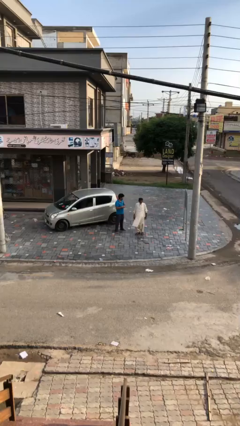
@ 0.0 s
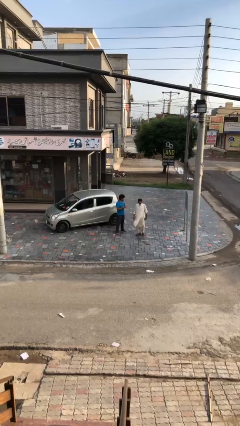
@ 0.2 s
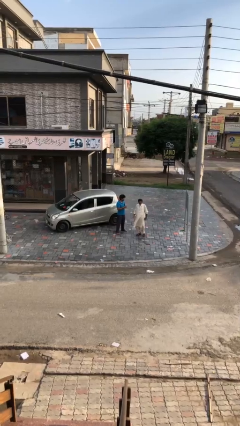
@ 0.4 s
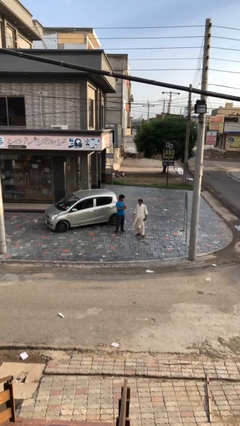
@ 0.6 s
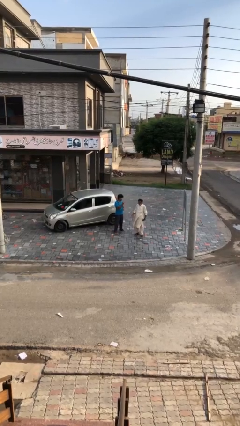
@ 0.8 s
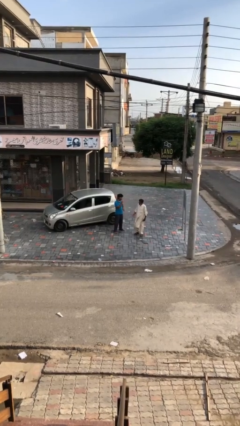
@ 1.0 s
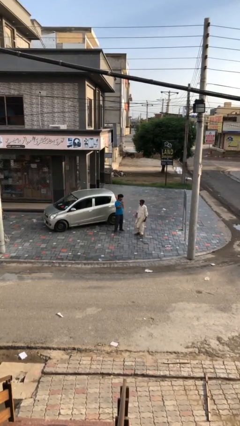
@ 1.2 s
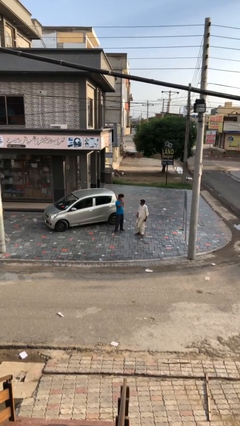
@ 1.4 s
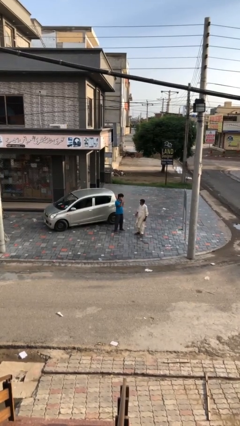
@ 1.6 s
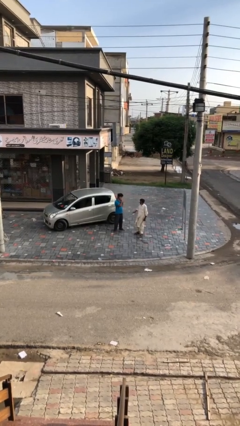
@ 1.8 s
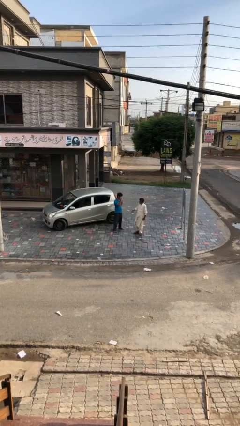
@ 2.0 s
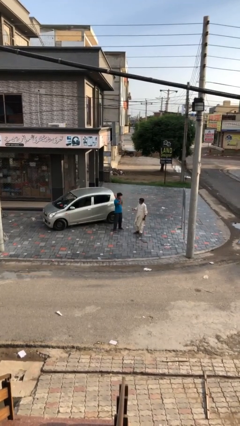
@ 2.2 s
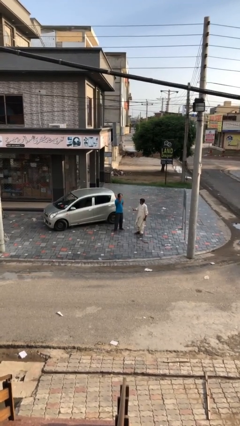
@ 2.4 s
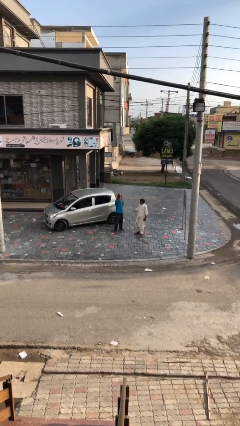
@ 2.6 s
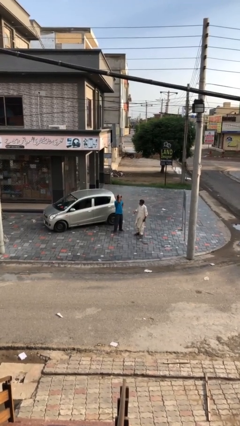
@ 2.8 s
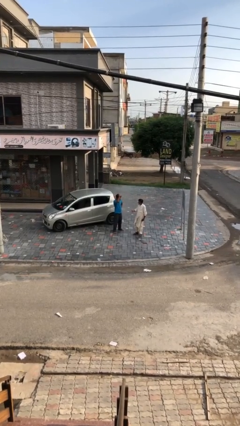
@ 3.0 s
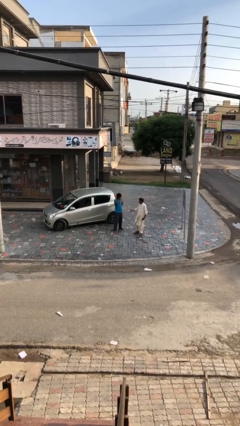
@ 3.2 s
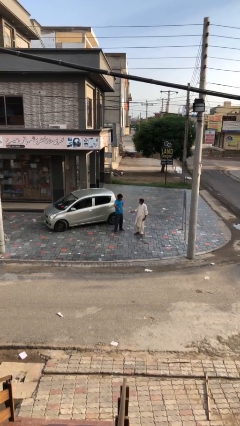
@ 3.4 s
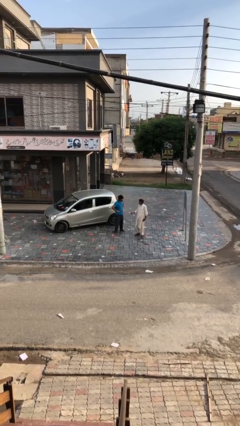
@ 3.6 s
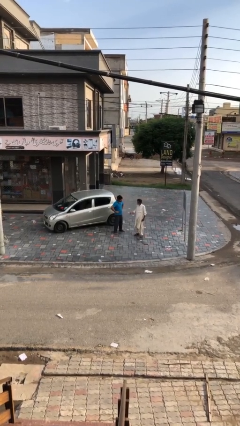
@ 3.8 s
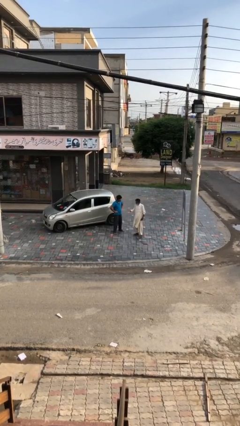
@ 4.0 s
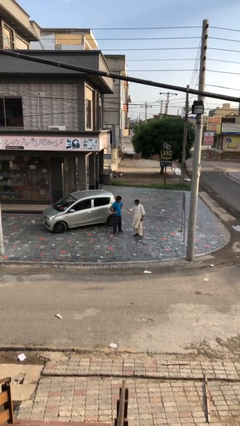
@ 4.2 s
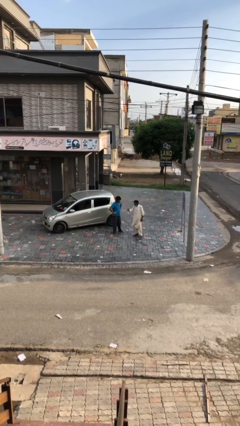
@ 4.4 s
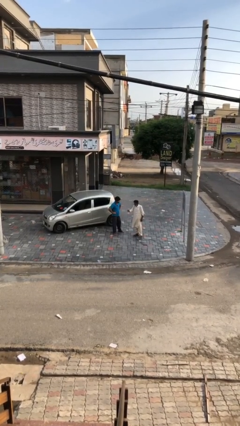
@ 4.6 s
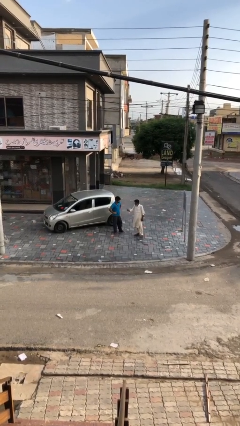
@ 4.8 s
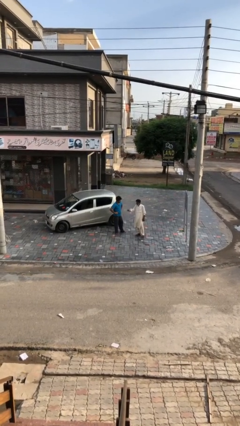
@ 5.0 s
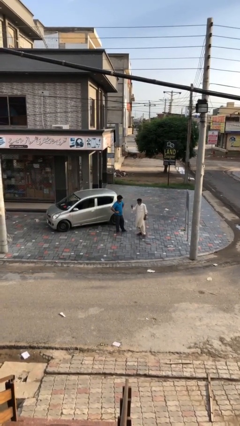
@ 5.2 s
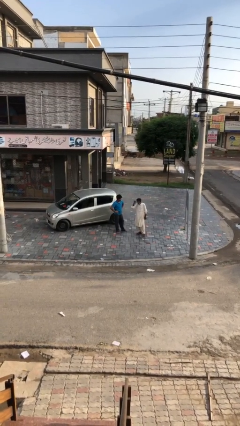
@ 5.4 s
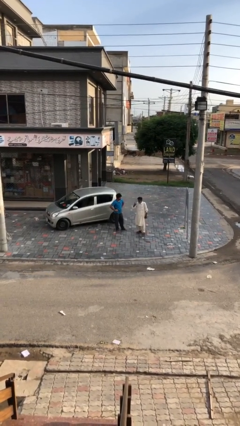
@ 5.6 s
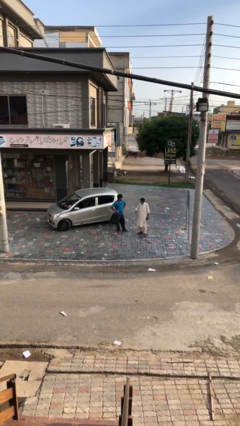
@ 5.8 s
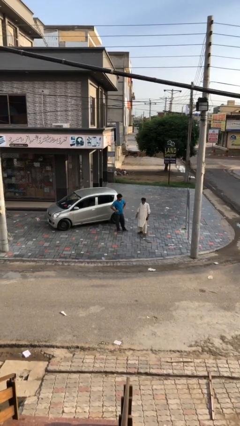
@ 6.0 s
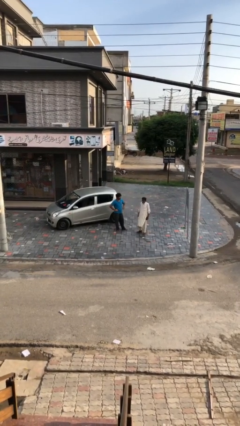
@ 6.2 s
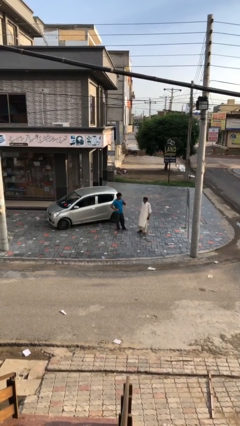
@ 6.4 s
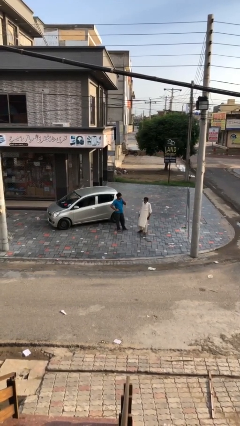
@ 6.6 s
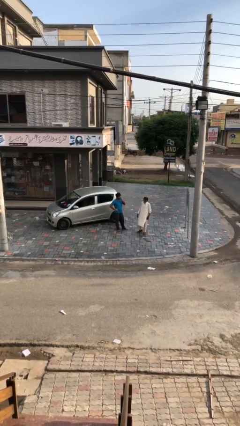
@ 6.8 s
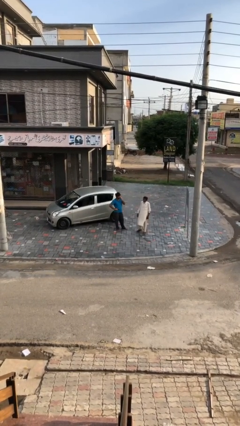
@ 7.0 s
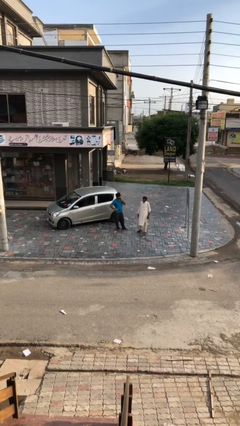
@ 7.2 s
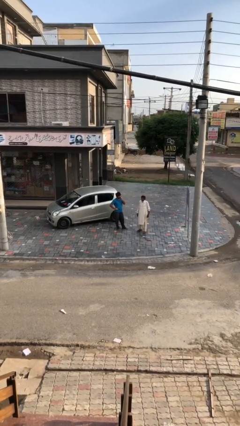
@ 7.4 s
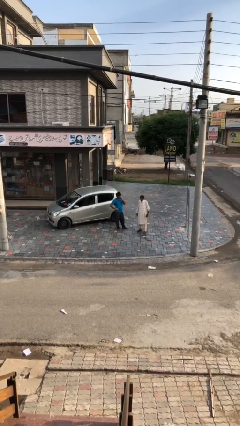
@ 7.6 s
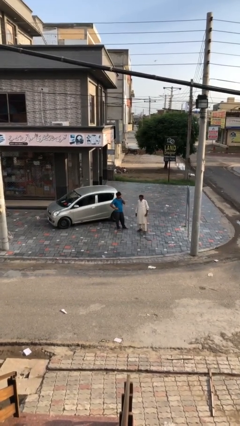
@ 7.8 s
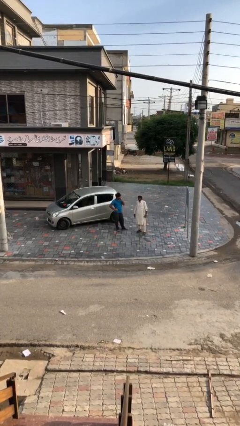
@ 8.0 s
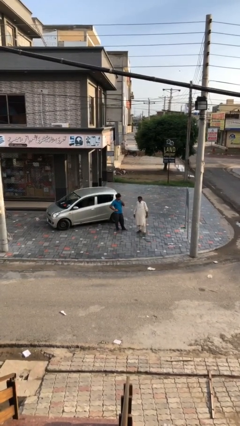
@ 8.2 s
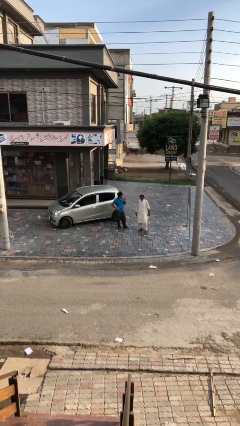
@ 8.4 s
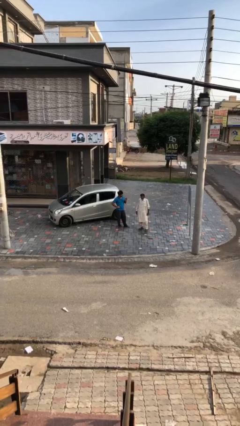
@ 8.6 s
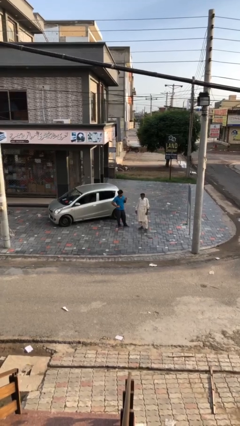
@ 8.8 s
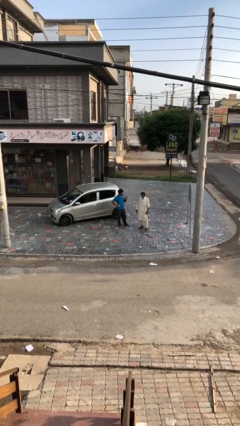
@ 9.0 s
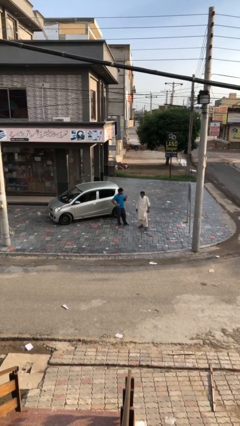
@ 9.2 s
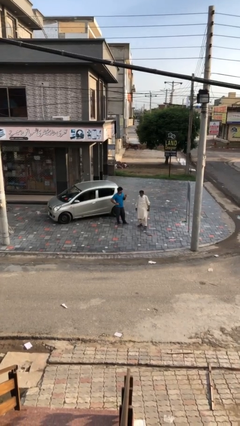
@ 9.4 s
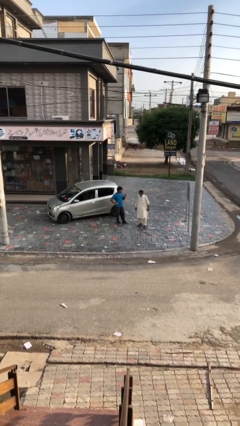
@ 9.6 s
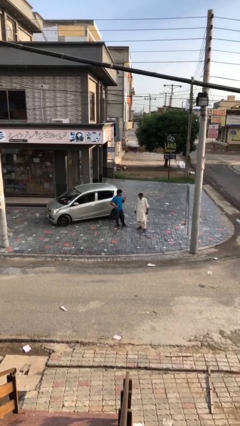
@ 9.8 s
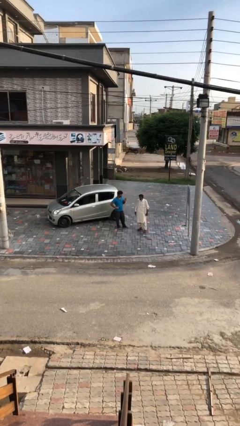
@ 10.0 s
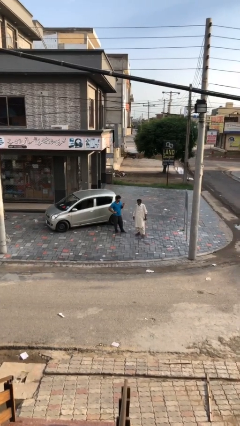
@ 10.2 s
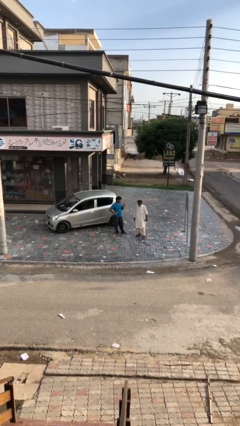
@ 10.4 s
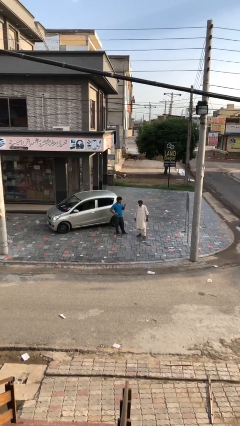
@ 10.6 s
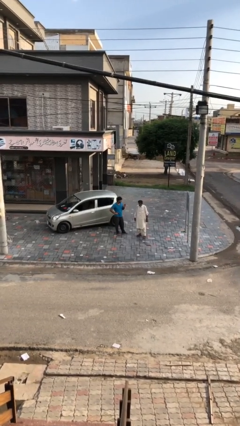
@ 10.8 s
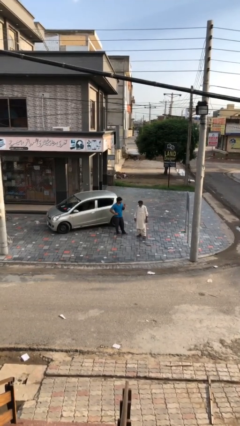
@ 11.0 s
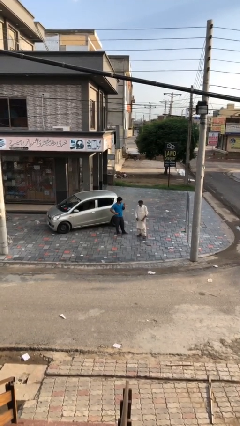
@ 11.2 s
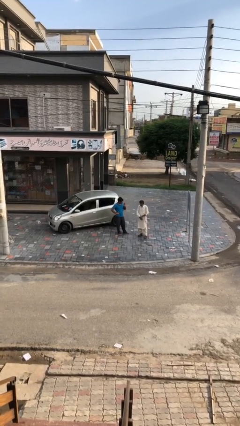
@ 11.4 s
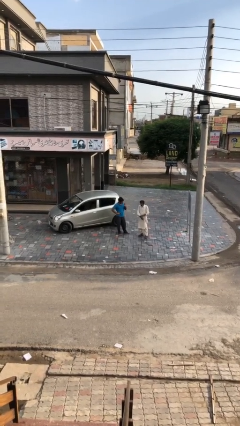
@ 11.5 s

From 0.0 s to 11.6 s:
person talks to person

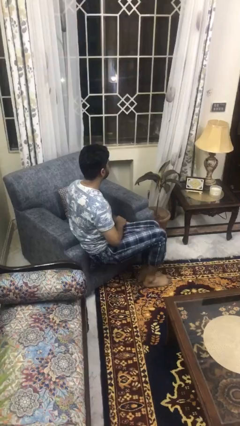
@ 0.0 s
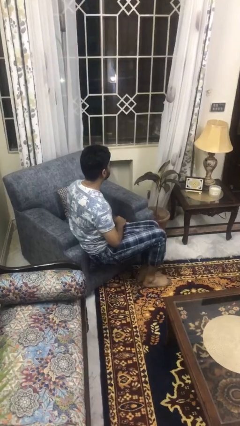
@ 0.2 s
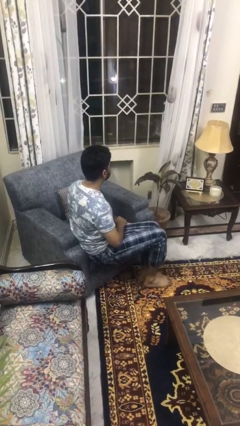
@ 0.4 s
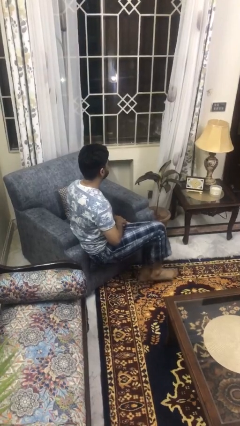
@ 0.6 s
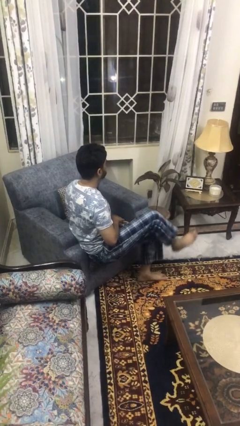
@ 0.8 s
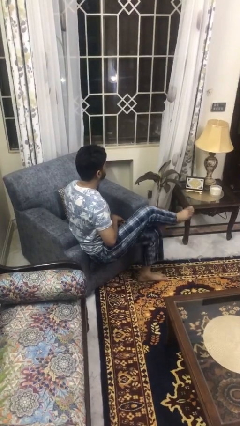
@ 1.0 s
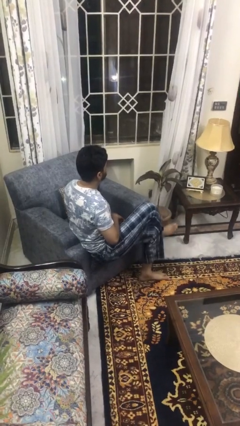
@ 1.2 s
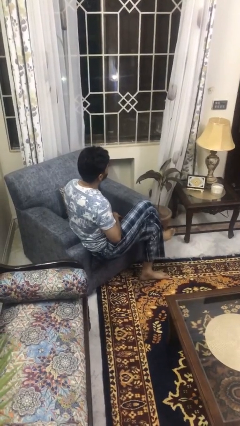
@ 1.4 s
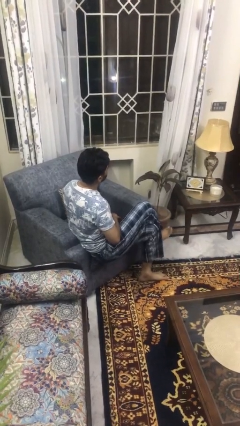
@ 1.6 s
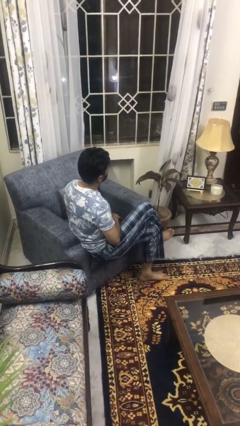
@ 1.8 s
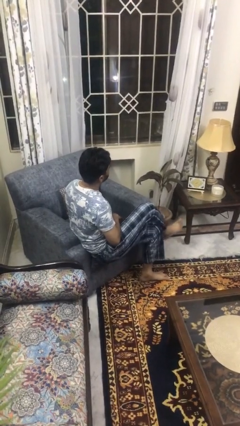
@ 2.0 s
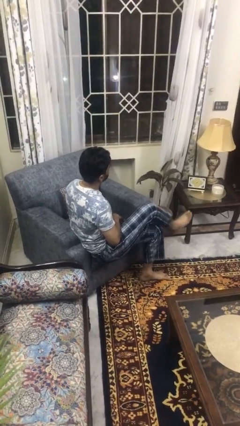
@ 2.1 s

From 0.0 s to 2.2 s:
person crosses legs

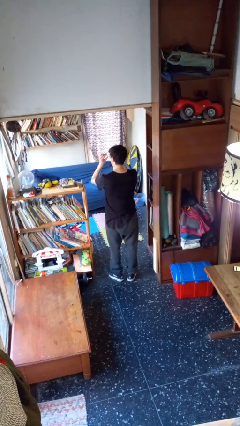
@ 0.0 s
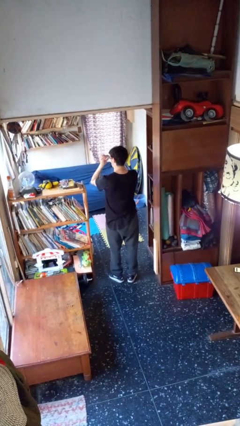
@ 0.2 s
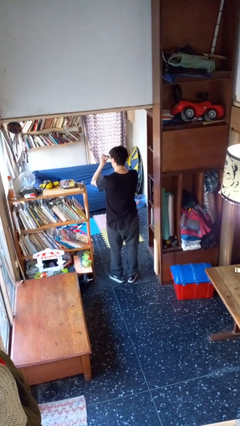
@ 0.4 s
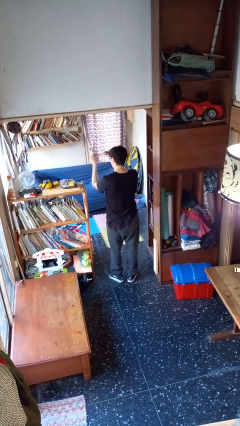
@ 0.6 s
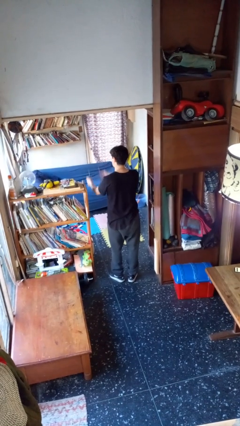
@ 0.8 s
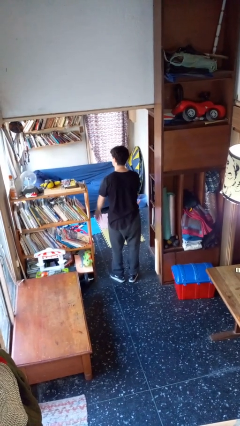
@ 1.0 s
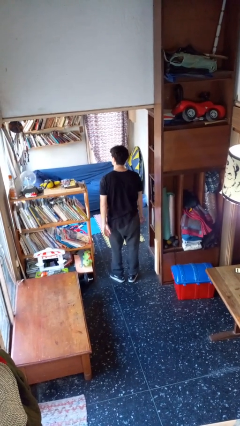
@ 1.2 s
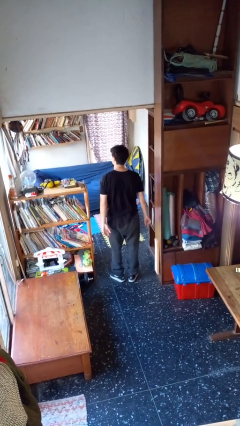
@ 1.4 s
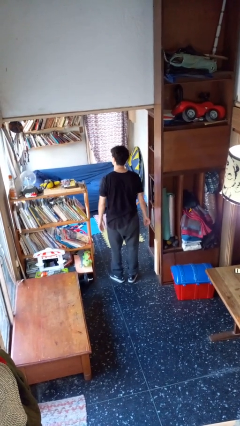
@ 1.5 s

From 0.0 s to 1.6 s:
person takes off glasses

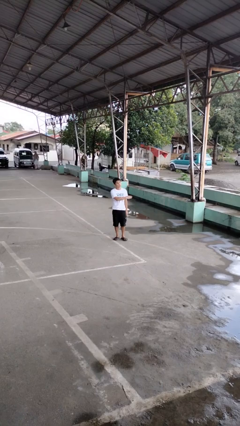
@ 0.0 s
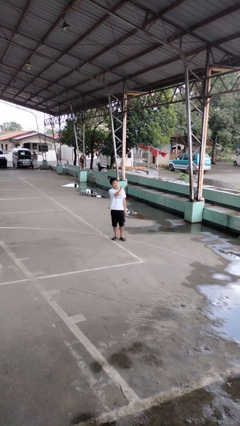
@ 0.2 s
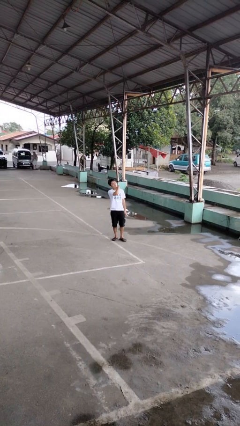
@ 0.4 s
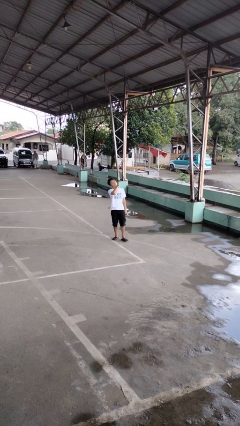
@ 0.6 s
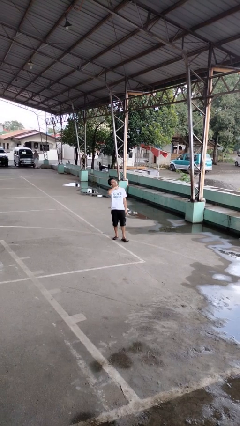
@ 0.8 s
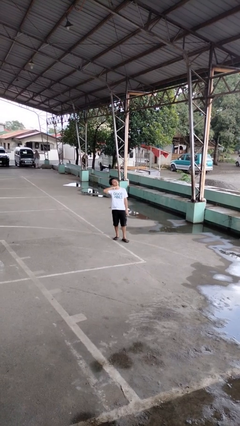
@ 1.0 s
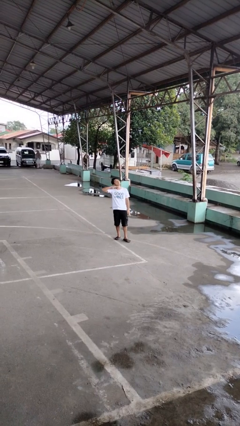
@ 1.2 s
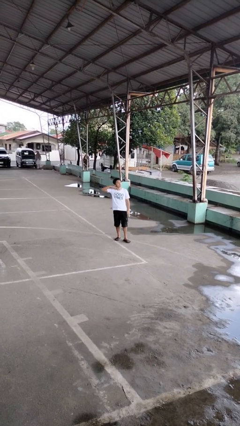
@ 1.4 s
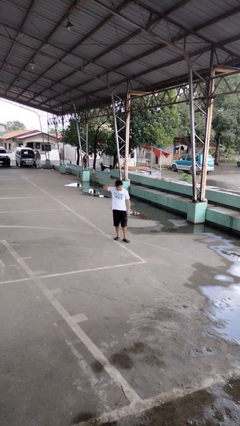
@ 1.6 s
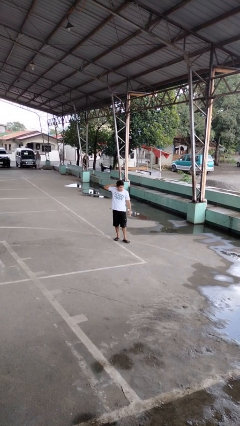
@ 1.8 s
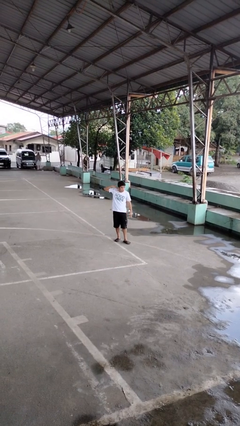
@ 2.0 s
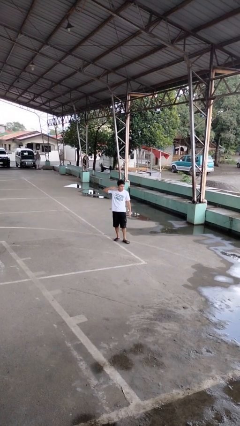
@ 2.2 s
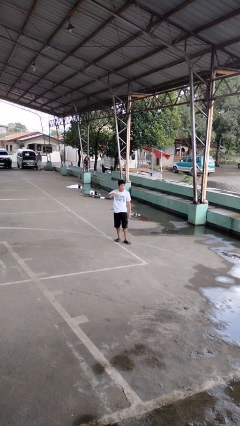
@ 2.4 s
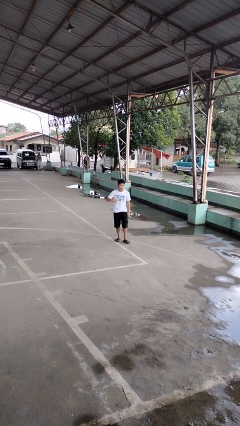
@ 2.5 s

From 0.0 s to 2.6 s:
person gestures cut
